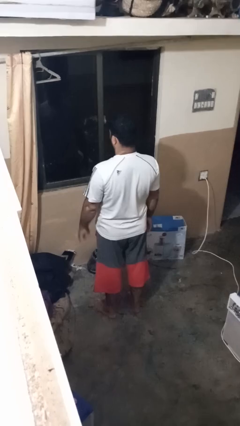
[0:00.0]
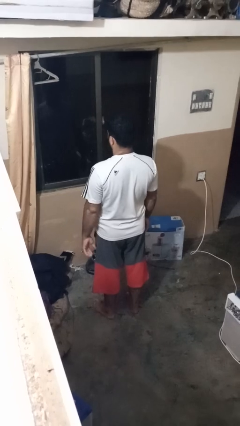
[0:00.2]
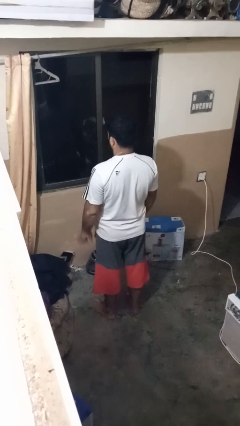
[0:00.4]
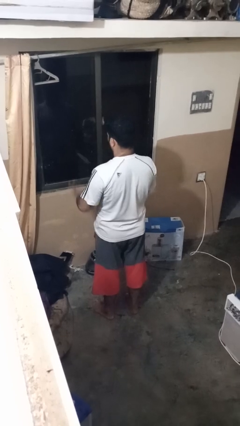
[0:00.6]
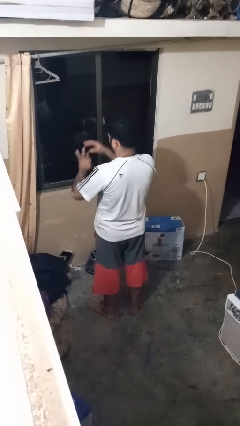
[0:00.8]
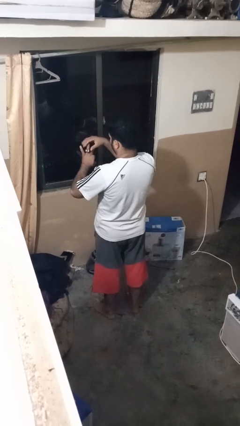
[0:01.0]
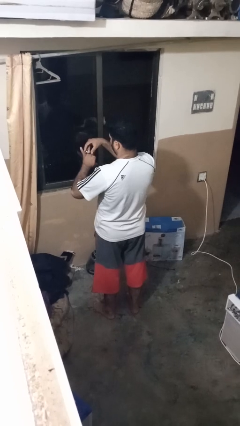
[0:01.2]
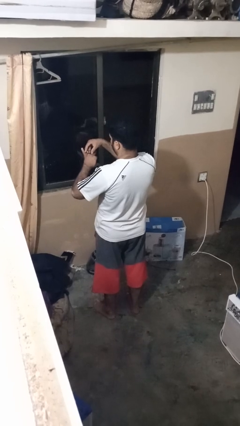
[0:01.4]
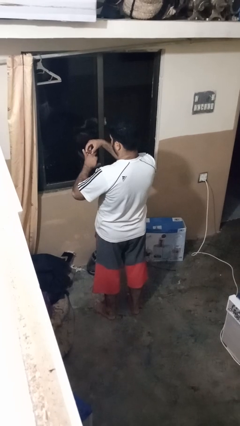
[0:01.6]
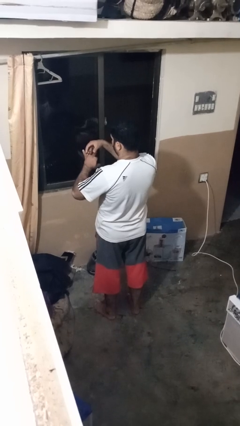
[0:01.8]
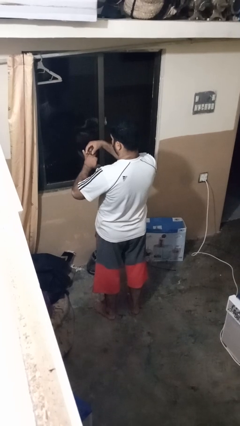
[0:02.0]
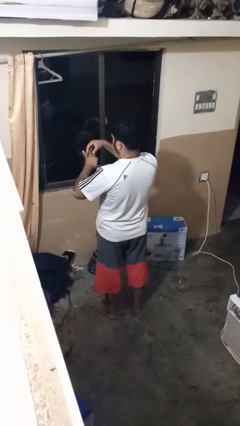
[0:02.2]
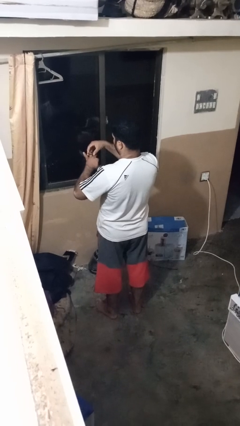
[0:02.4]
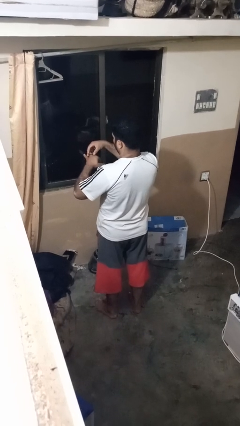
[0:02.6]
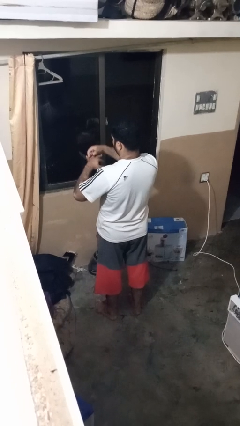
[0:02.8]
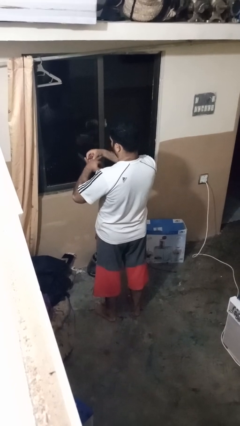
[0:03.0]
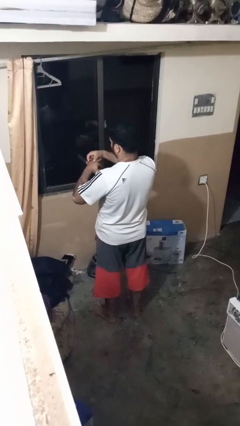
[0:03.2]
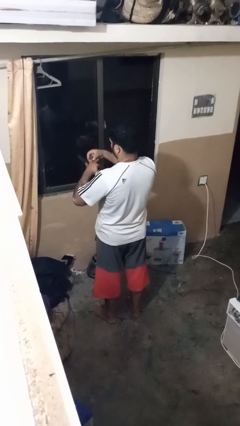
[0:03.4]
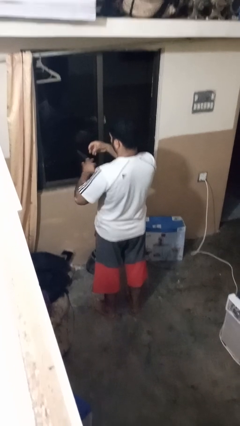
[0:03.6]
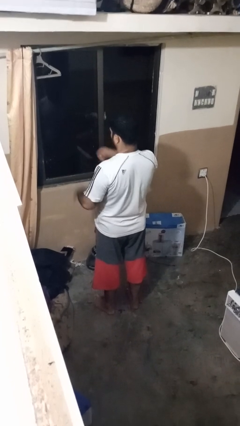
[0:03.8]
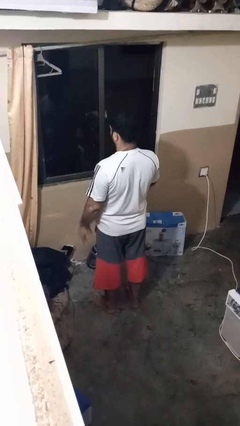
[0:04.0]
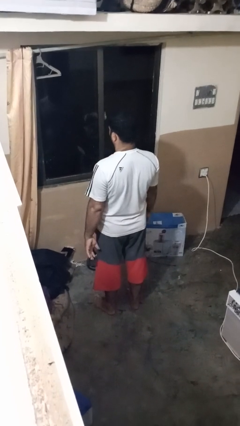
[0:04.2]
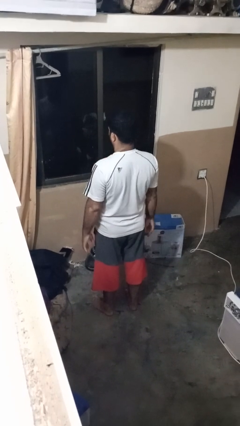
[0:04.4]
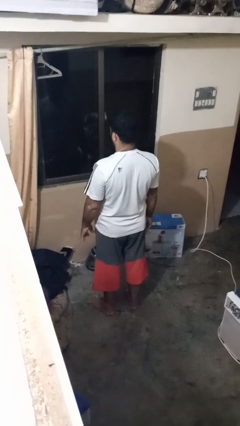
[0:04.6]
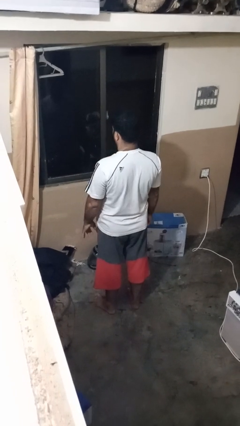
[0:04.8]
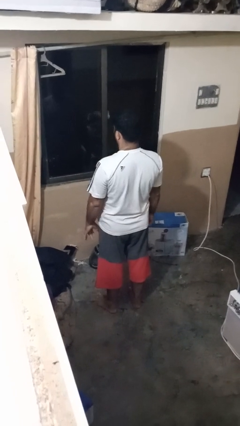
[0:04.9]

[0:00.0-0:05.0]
person takes off ring

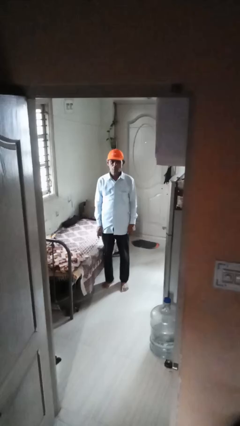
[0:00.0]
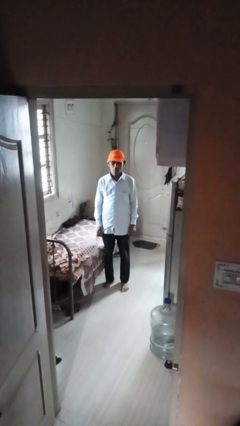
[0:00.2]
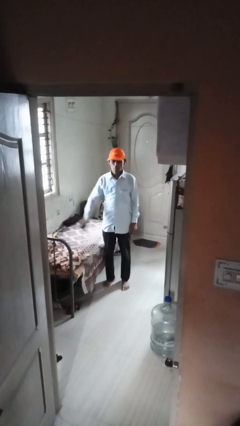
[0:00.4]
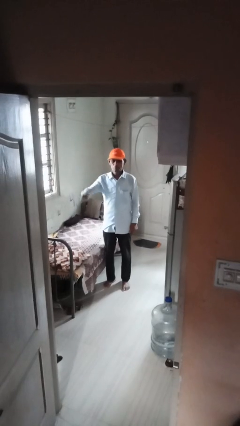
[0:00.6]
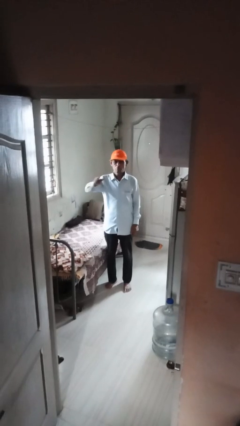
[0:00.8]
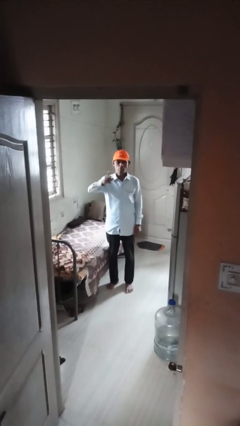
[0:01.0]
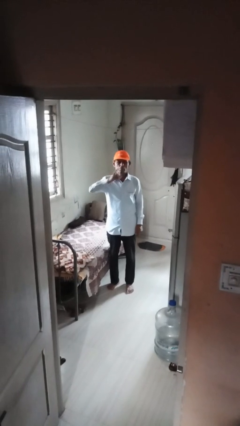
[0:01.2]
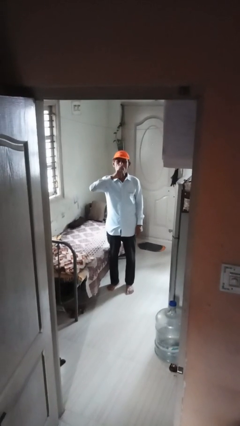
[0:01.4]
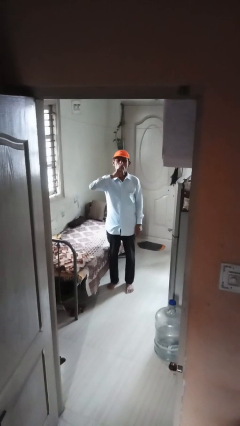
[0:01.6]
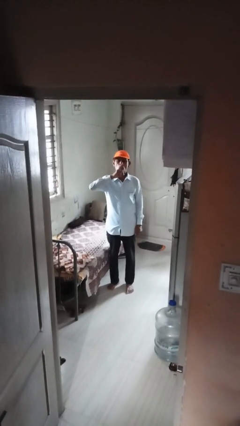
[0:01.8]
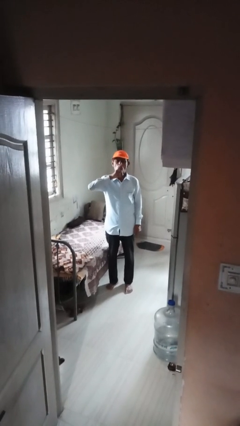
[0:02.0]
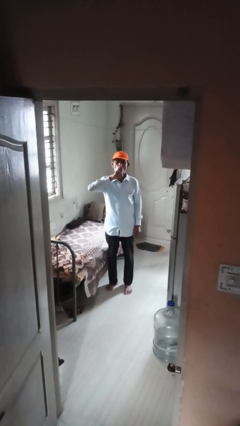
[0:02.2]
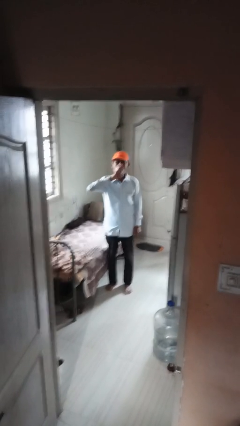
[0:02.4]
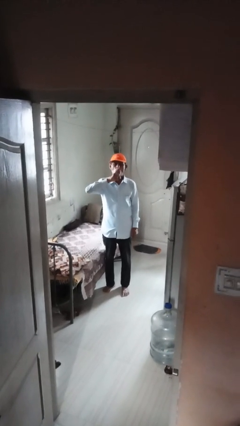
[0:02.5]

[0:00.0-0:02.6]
person gestures be quiet

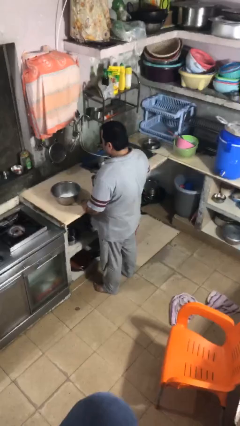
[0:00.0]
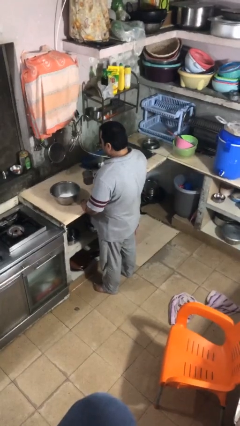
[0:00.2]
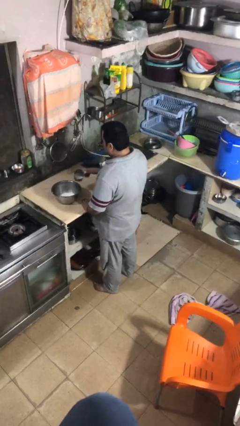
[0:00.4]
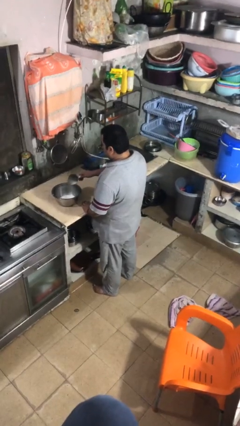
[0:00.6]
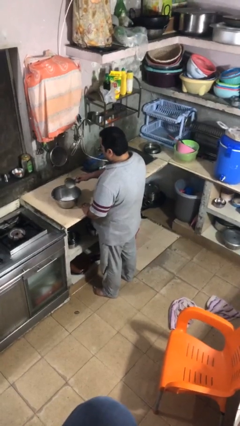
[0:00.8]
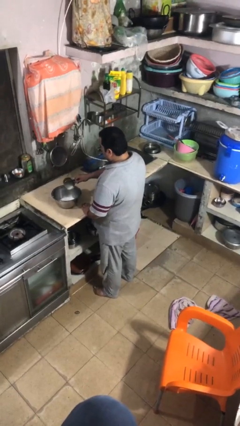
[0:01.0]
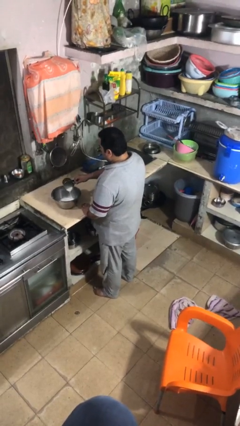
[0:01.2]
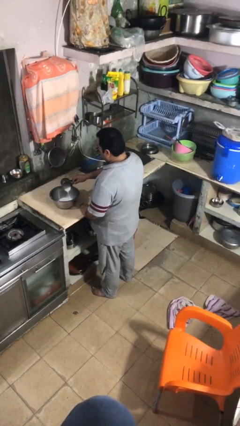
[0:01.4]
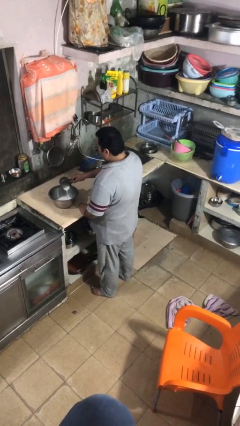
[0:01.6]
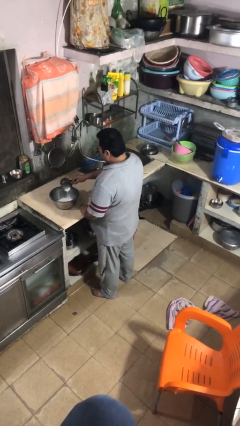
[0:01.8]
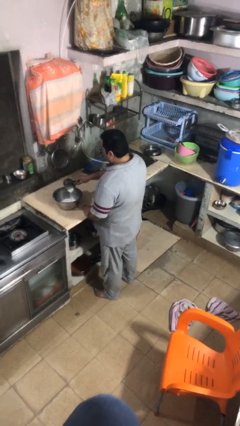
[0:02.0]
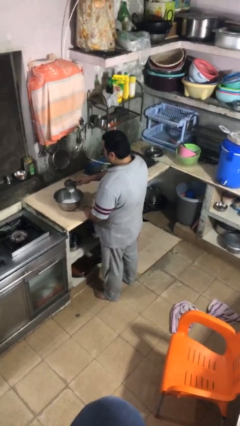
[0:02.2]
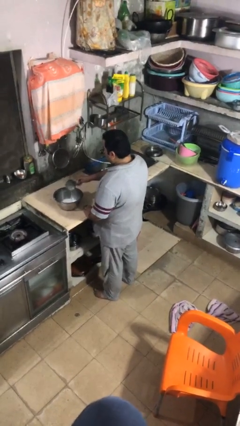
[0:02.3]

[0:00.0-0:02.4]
person pours into bowl

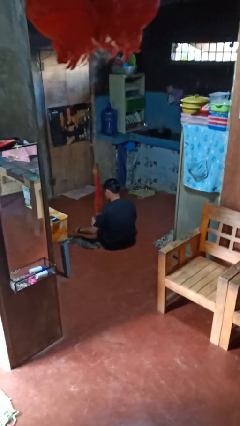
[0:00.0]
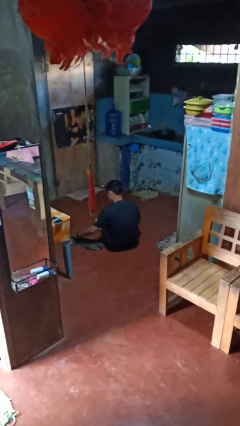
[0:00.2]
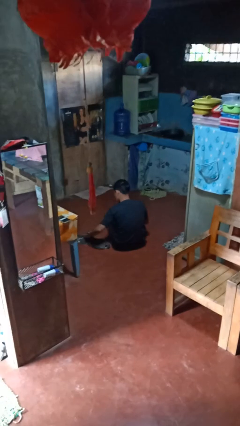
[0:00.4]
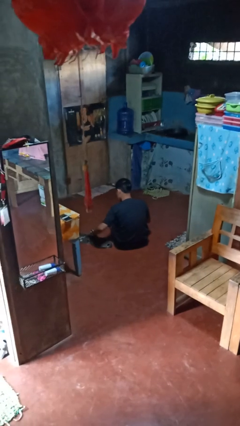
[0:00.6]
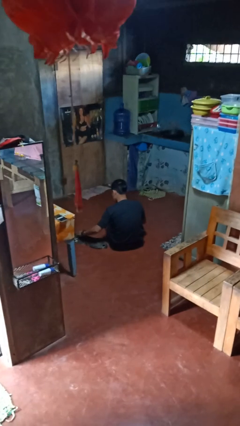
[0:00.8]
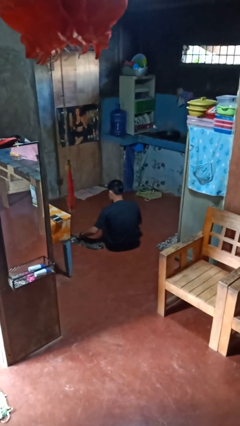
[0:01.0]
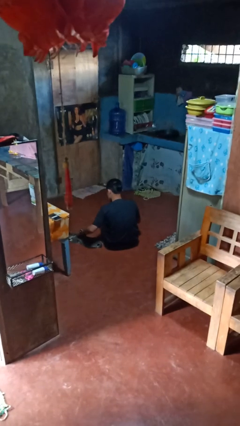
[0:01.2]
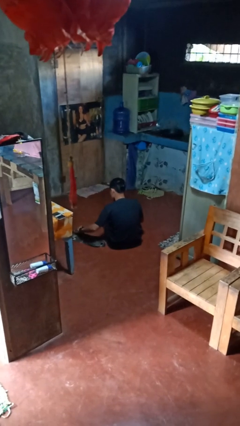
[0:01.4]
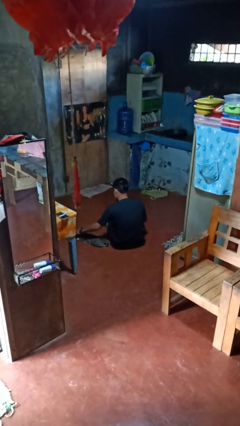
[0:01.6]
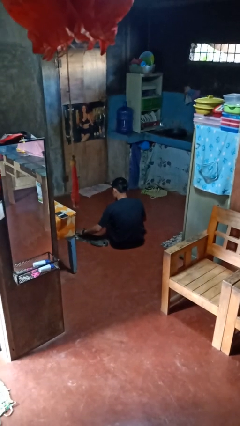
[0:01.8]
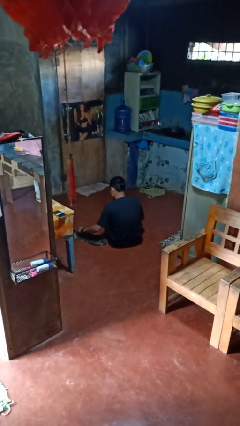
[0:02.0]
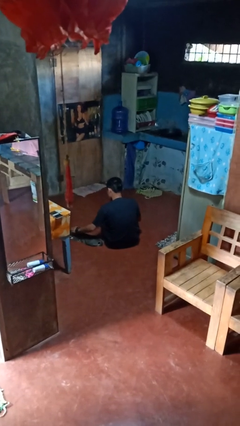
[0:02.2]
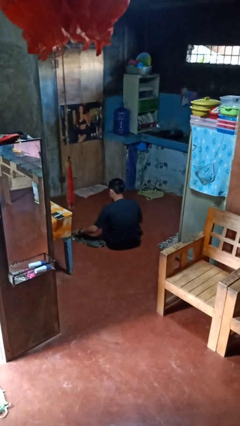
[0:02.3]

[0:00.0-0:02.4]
person pets cat

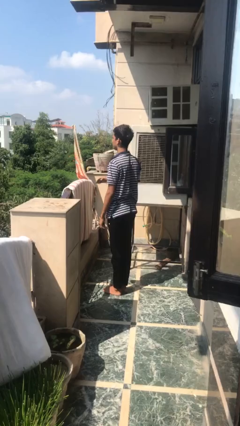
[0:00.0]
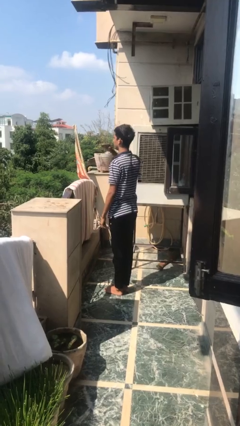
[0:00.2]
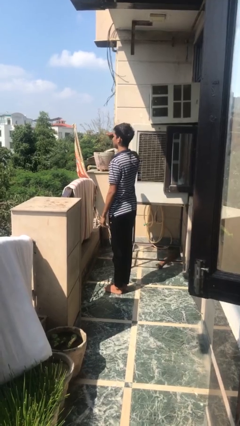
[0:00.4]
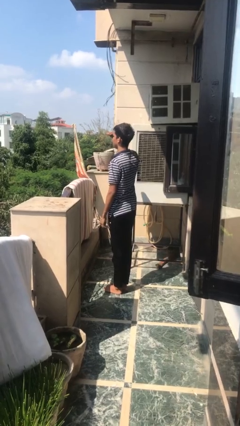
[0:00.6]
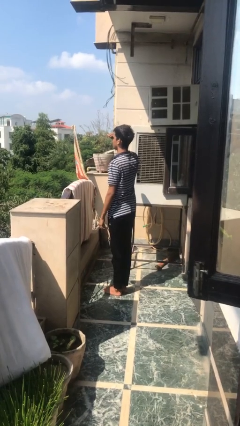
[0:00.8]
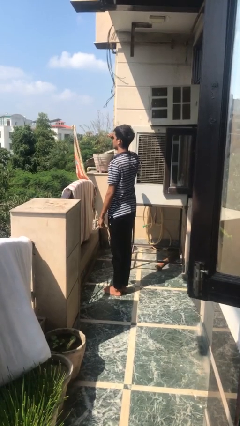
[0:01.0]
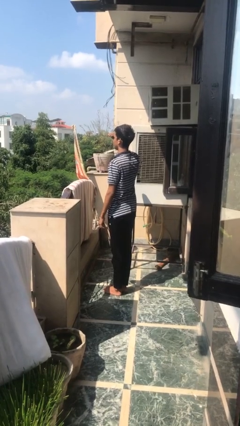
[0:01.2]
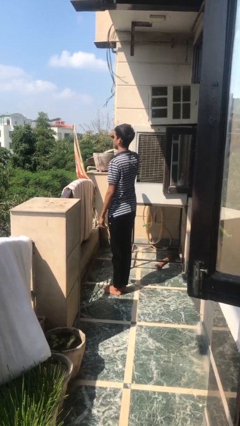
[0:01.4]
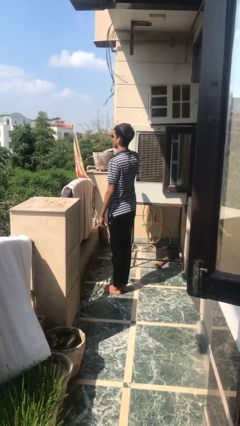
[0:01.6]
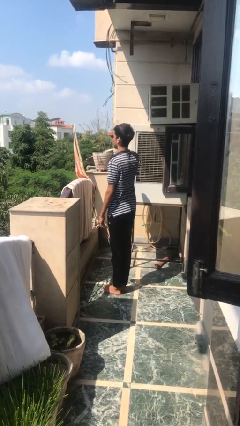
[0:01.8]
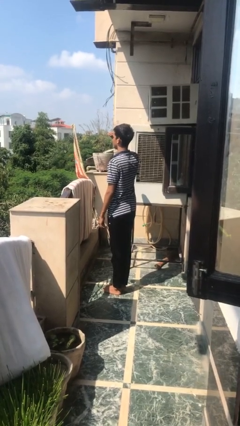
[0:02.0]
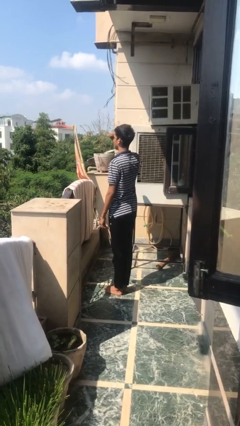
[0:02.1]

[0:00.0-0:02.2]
person shades eyes

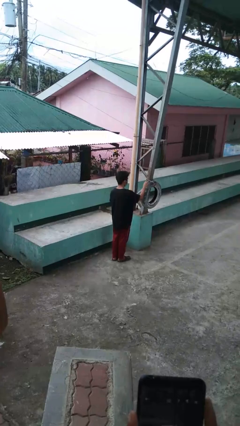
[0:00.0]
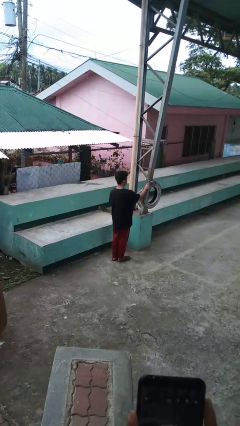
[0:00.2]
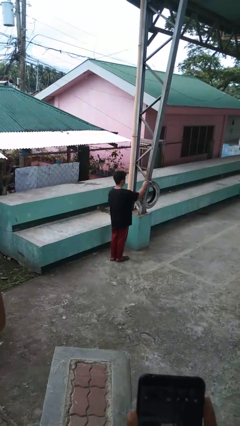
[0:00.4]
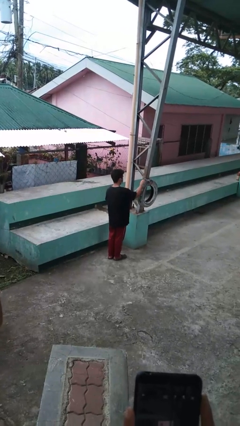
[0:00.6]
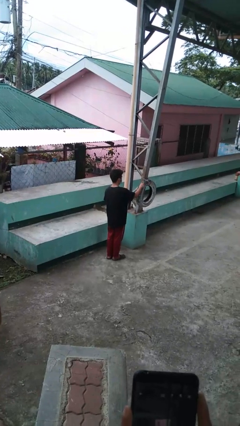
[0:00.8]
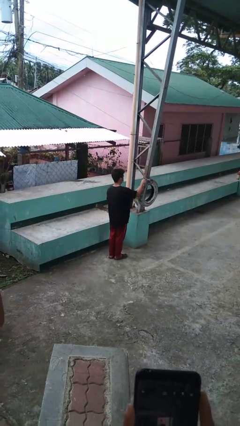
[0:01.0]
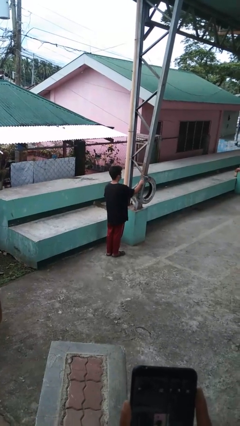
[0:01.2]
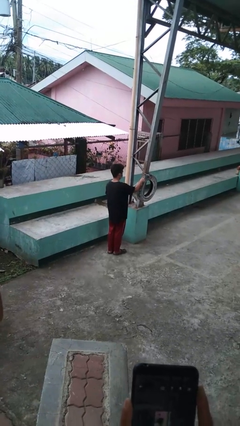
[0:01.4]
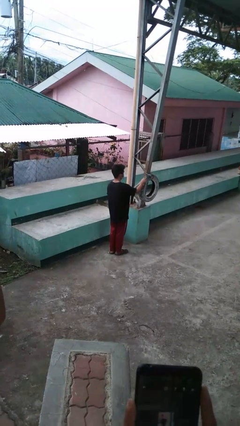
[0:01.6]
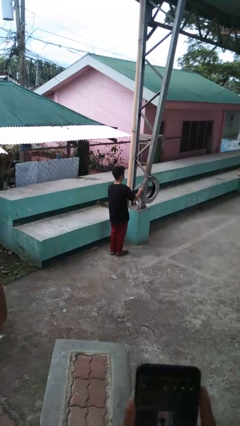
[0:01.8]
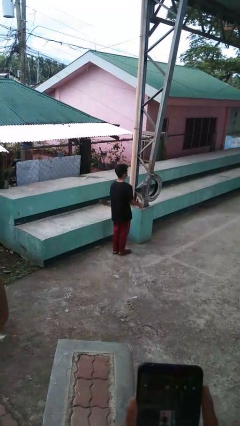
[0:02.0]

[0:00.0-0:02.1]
person taps object with finger

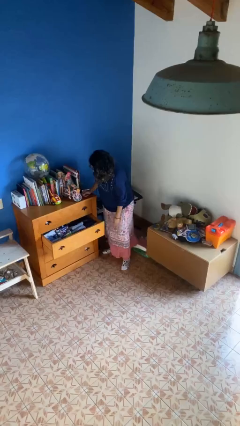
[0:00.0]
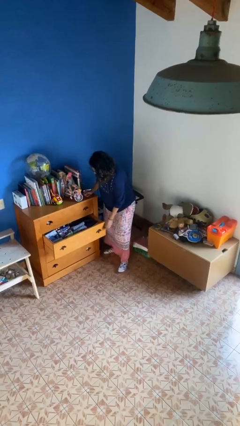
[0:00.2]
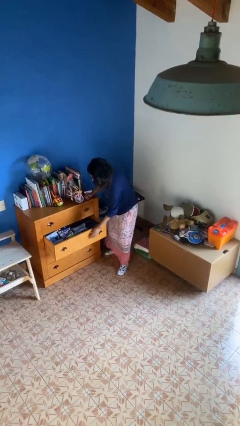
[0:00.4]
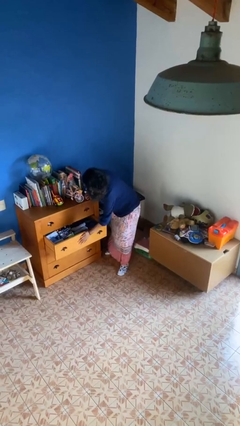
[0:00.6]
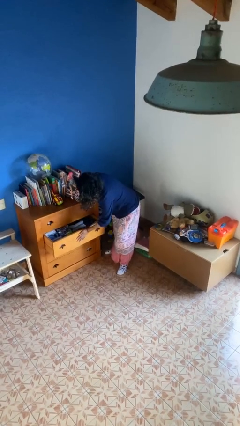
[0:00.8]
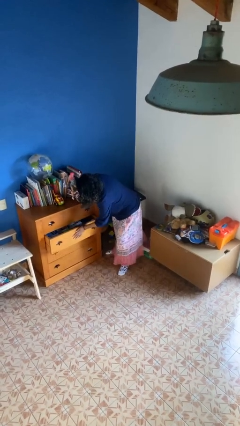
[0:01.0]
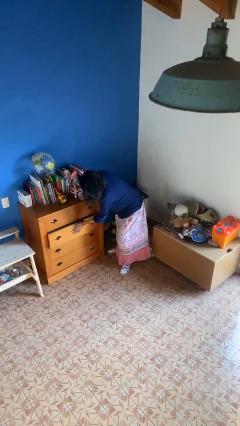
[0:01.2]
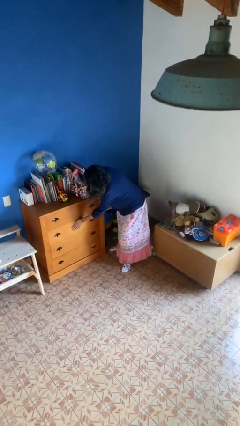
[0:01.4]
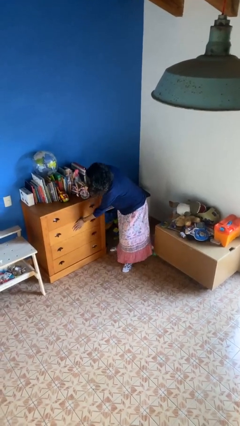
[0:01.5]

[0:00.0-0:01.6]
person closes dresser drawer
